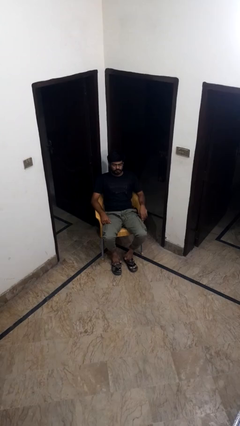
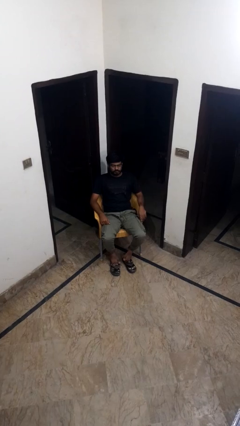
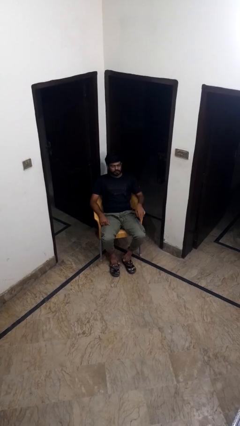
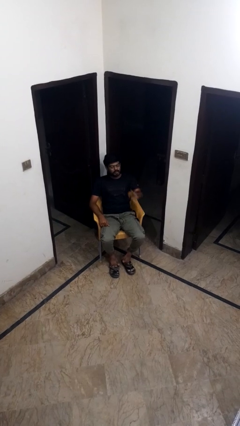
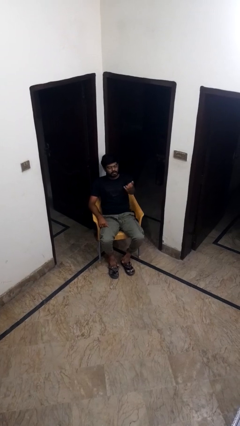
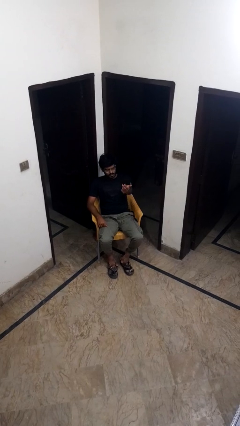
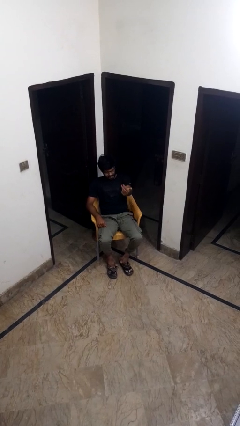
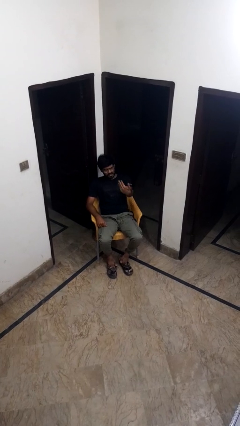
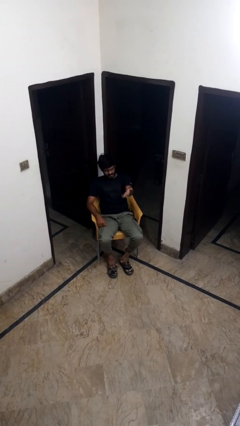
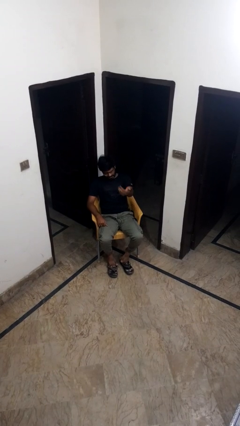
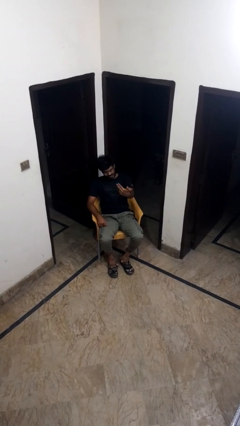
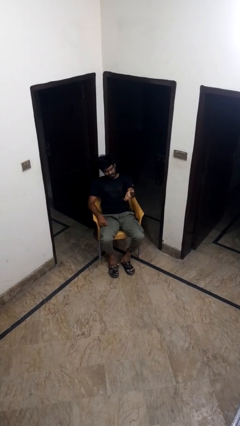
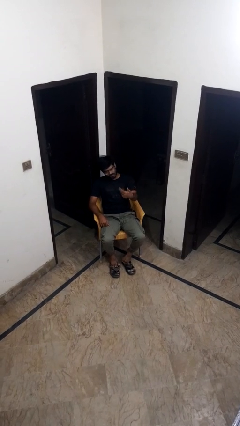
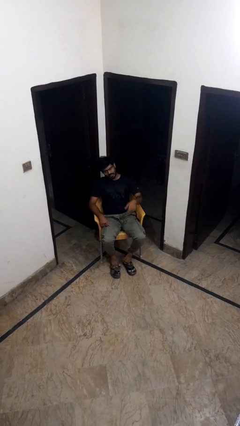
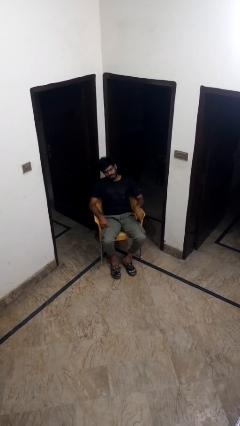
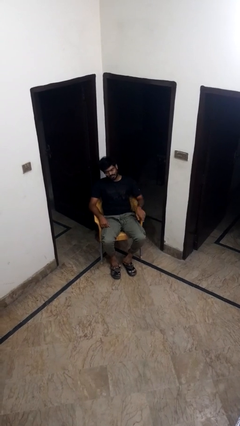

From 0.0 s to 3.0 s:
person gestures come here

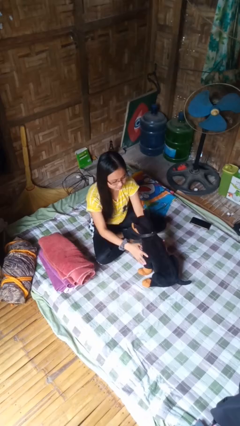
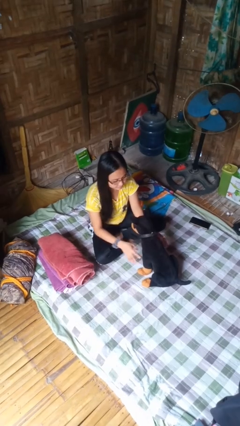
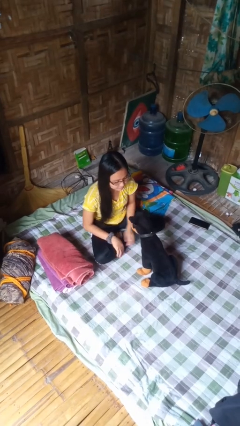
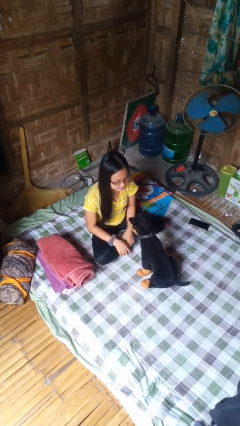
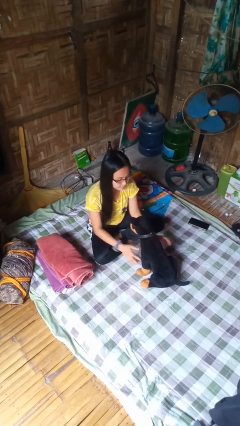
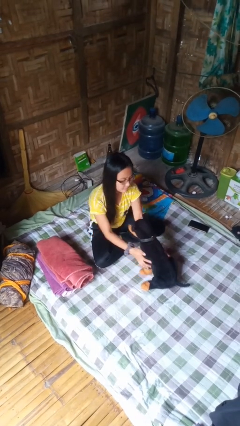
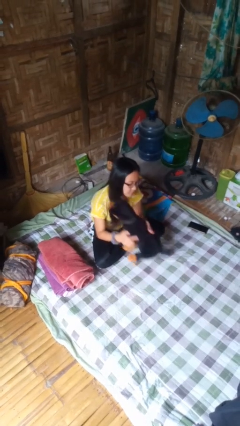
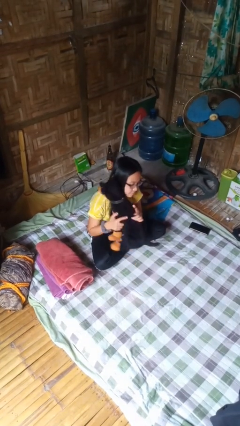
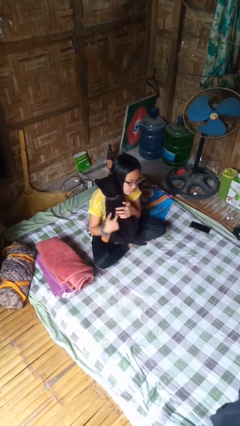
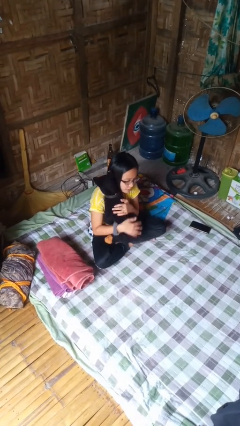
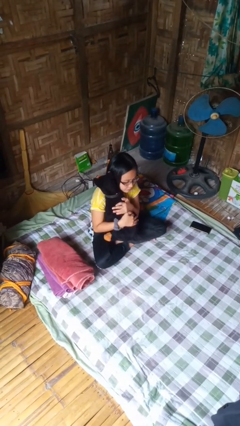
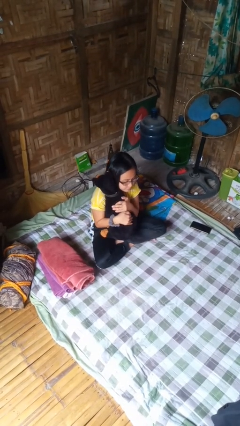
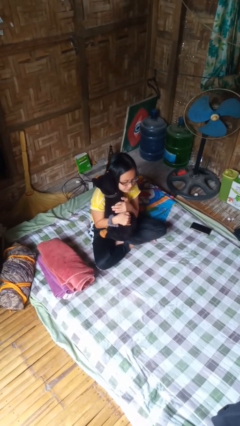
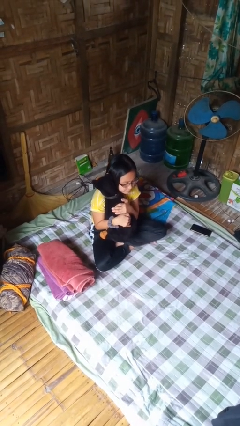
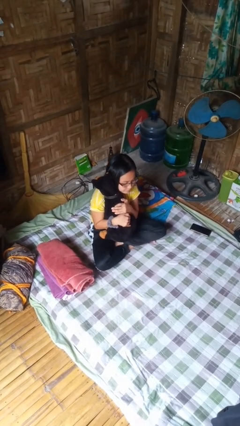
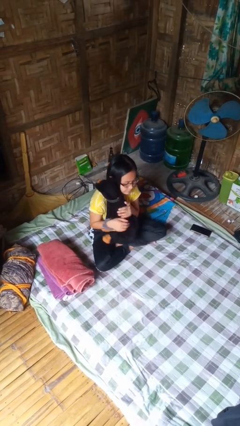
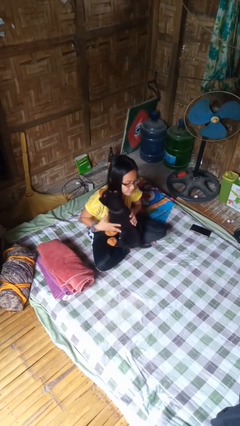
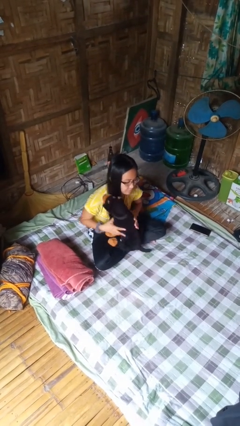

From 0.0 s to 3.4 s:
person hugs stuffed animal

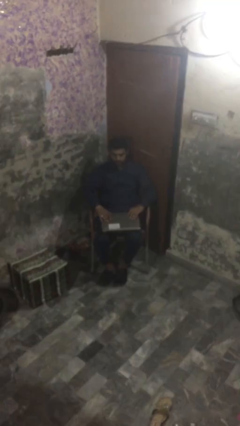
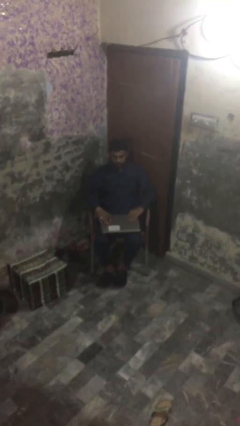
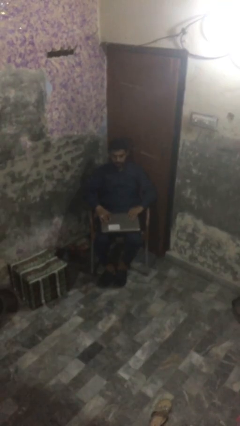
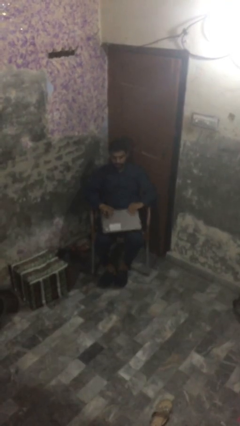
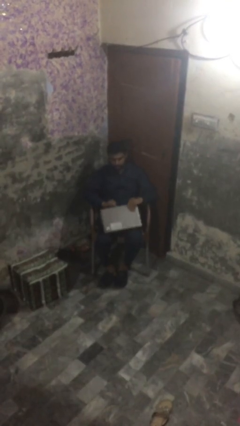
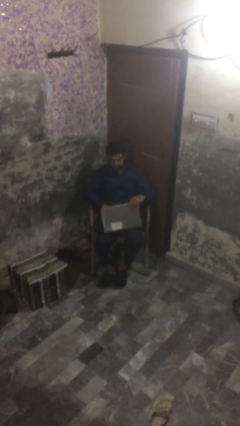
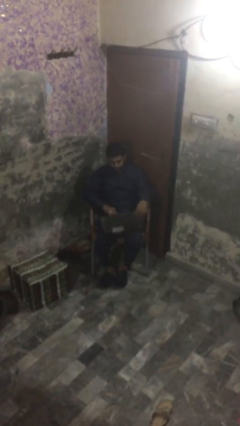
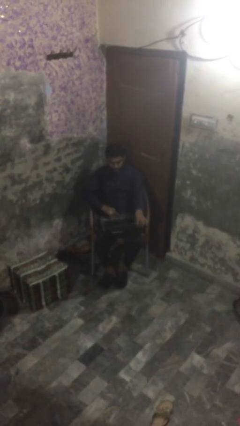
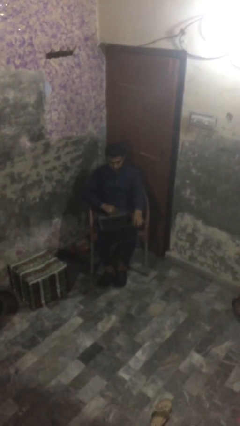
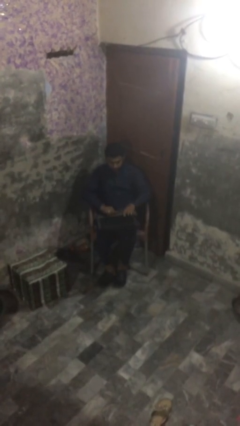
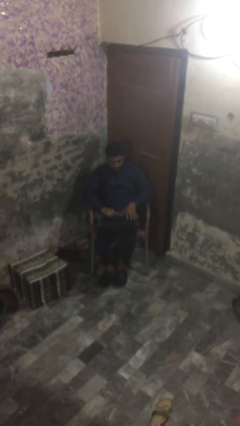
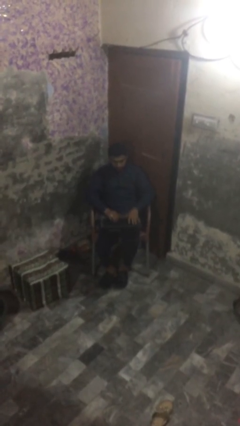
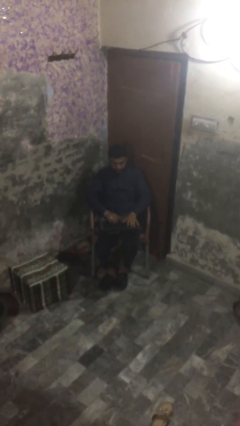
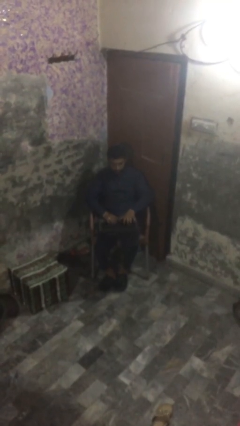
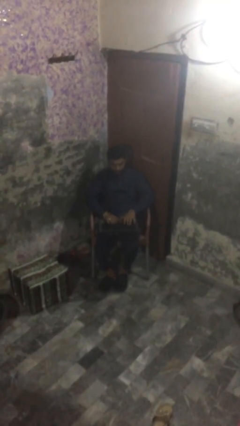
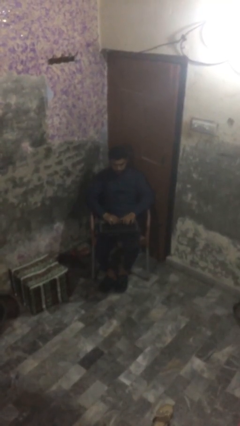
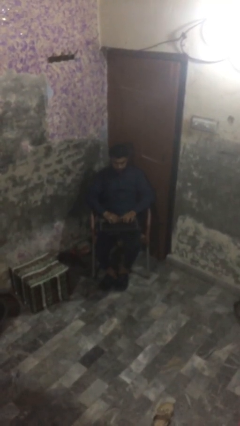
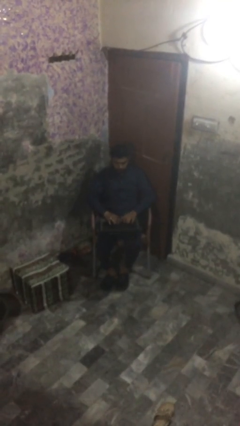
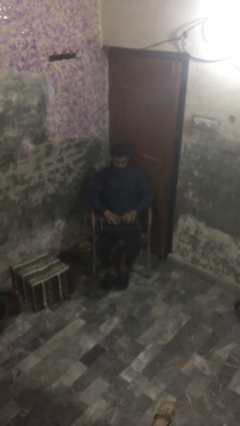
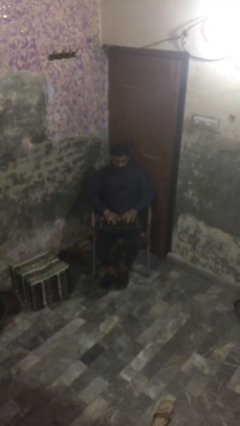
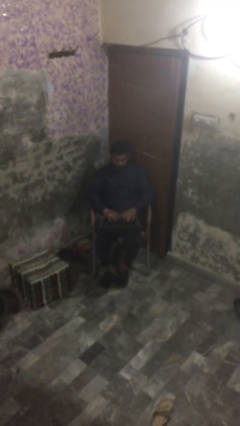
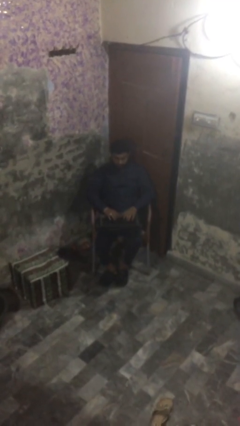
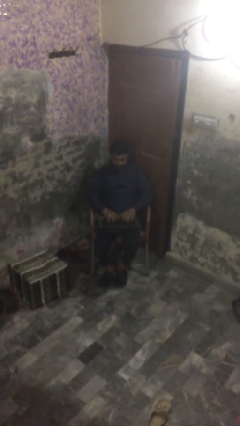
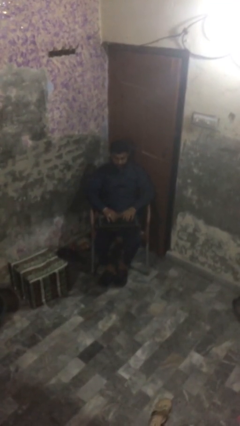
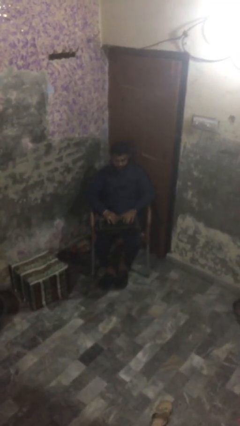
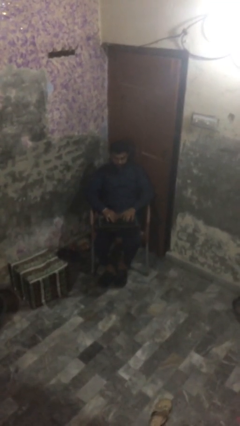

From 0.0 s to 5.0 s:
person interacts with laptop

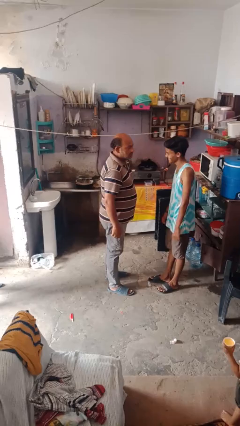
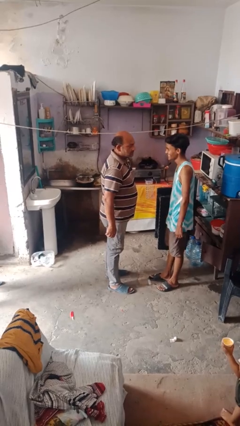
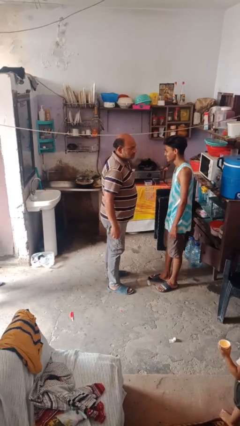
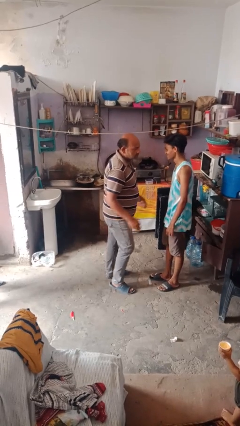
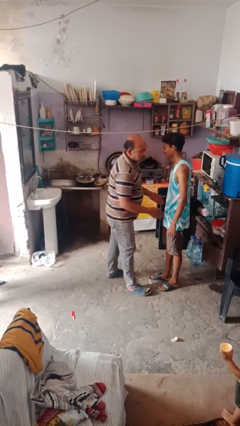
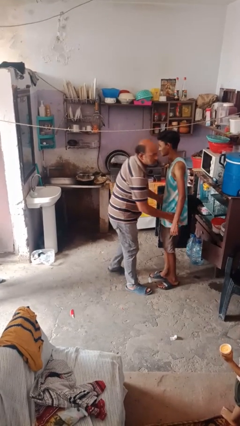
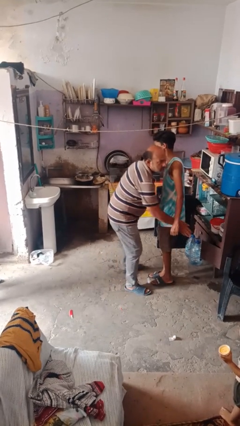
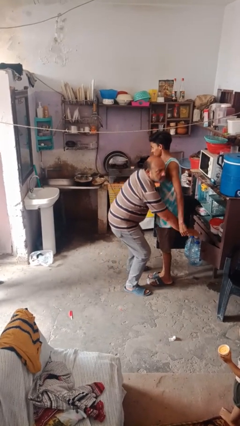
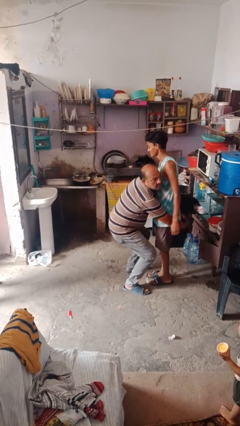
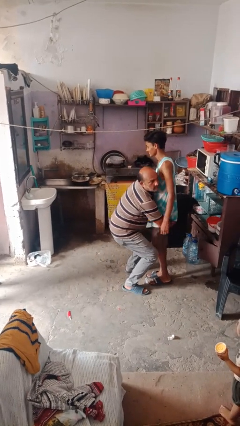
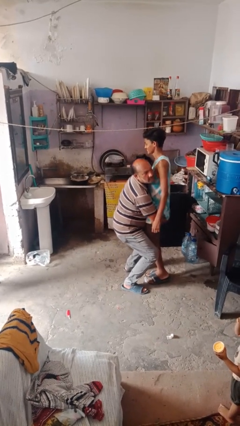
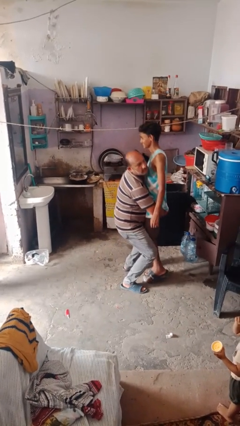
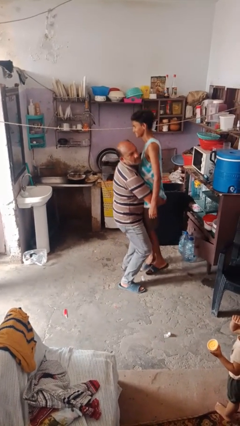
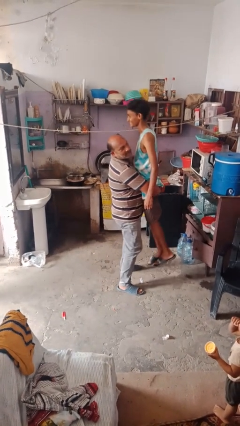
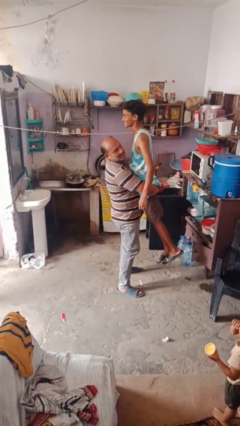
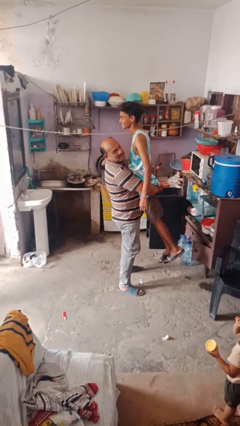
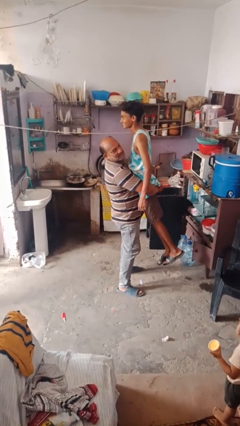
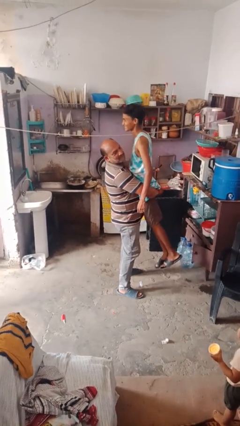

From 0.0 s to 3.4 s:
person picks up person

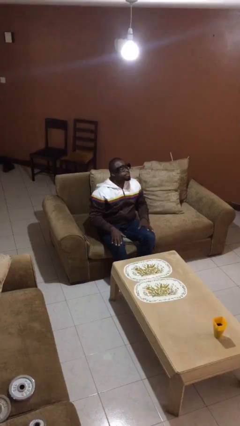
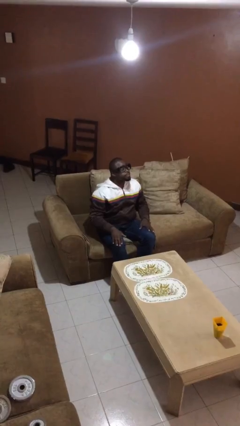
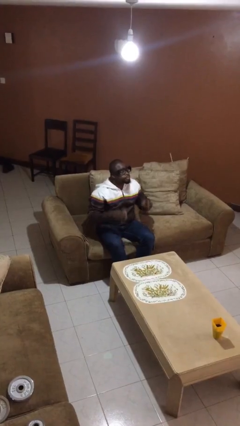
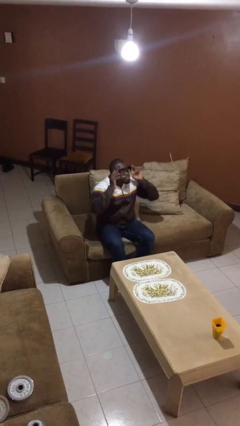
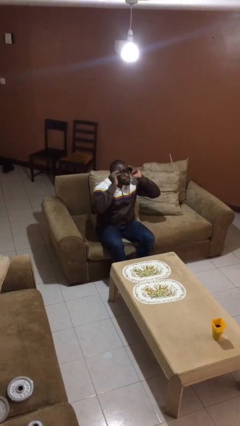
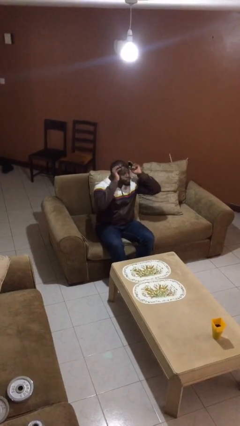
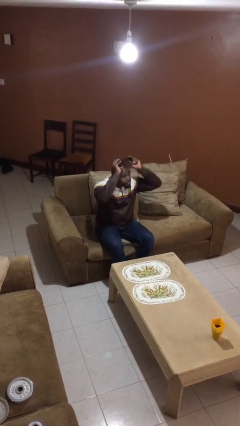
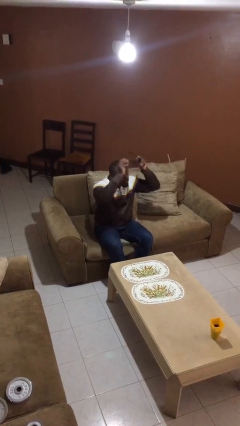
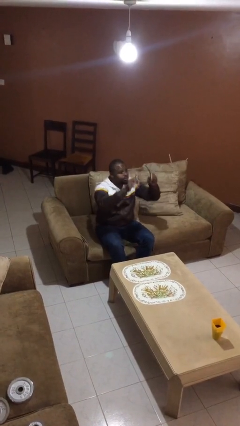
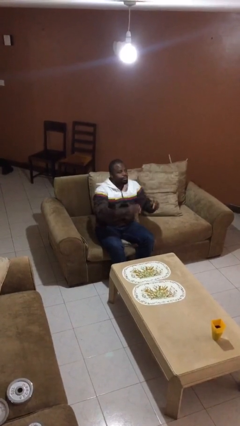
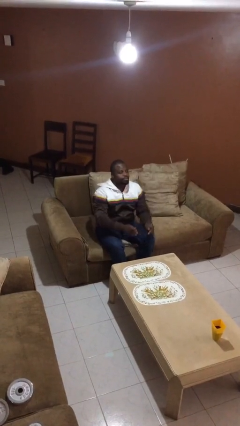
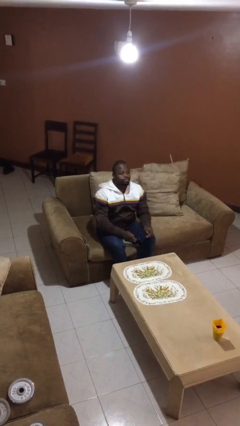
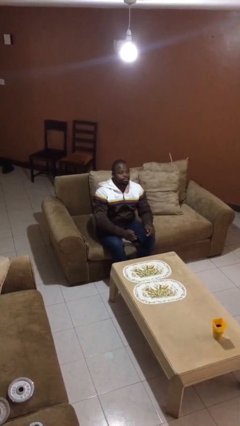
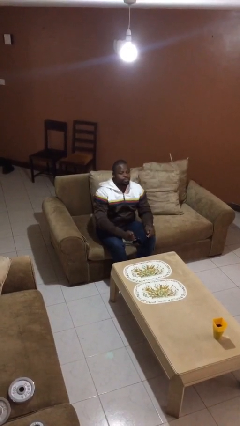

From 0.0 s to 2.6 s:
person takes off glasses

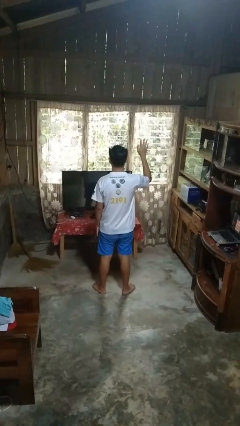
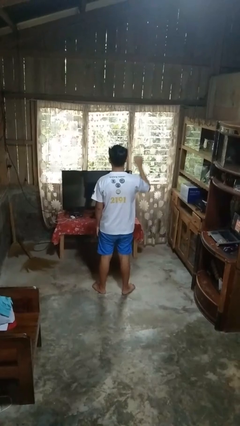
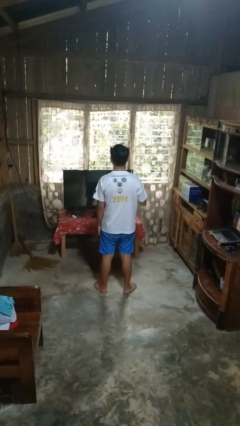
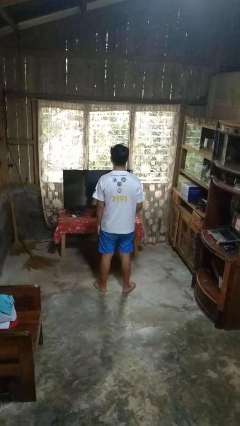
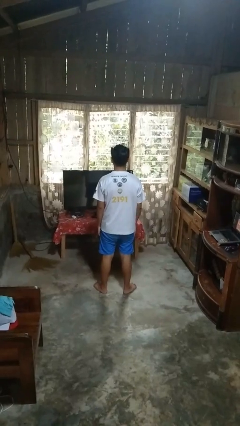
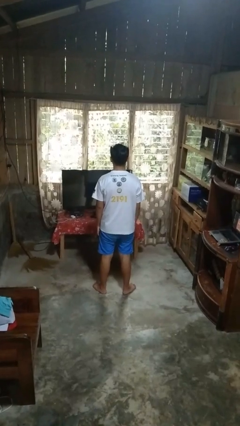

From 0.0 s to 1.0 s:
person gestures lower hand
